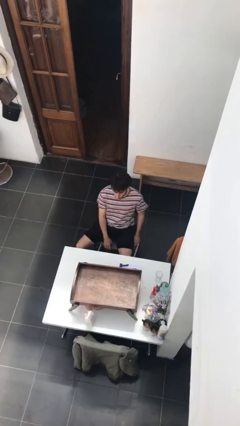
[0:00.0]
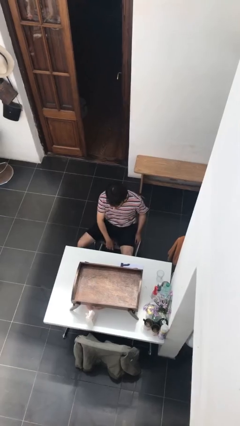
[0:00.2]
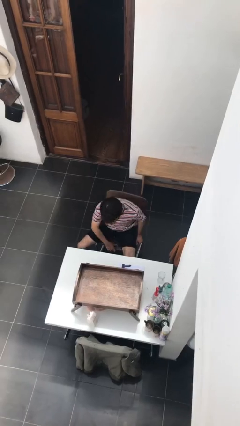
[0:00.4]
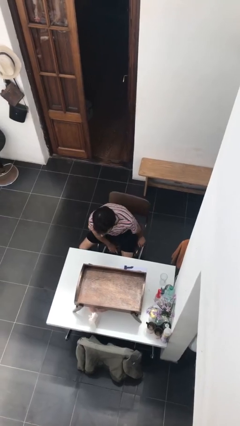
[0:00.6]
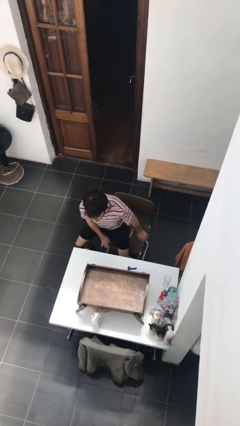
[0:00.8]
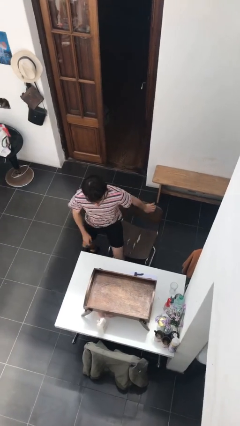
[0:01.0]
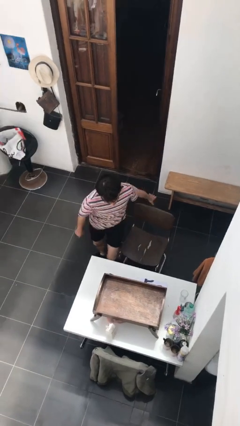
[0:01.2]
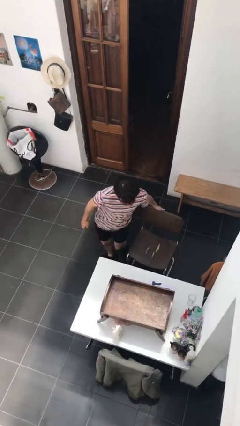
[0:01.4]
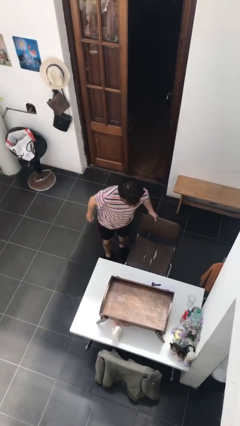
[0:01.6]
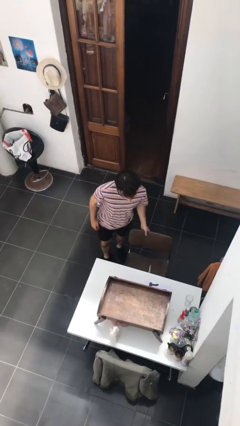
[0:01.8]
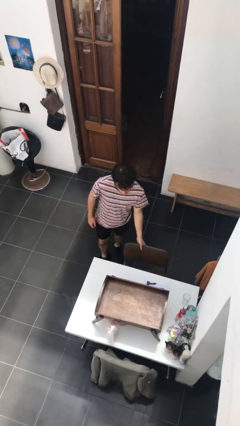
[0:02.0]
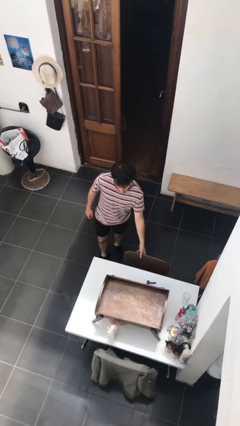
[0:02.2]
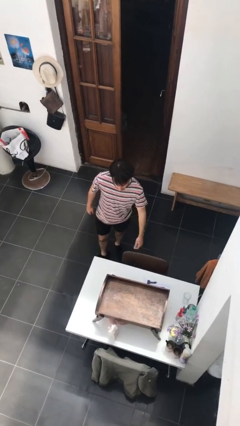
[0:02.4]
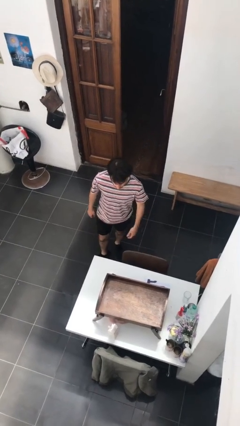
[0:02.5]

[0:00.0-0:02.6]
person stands up

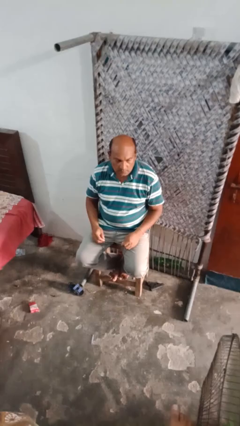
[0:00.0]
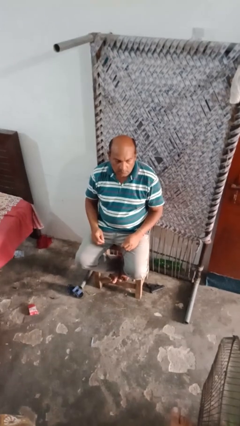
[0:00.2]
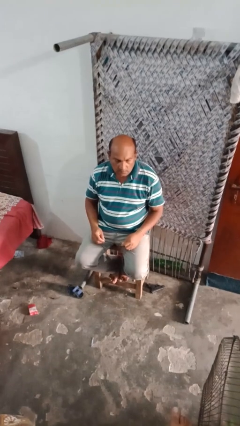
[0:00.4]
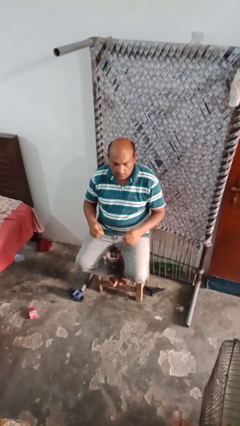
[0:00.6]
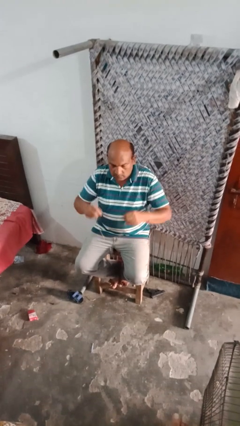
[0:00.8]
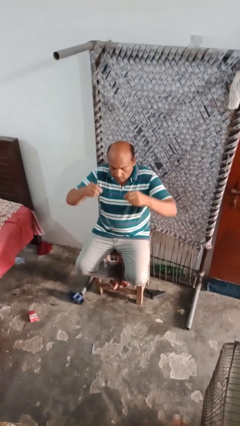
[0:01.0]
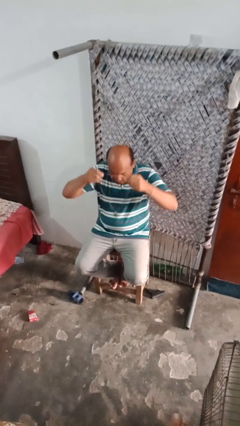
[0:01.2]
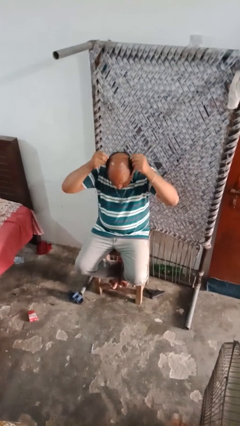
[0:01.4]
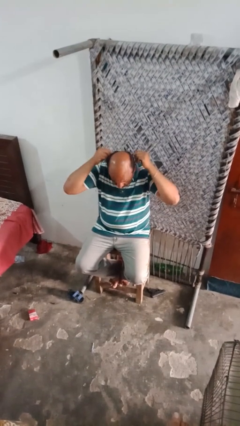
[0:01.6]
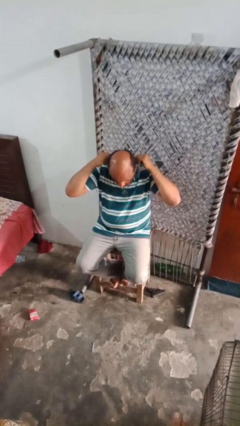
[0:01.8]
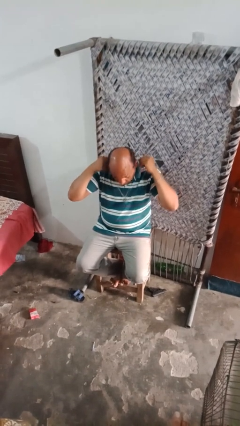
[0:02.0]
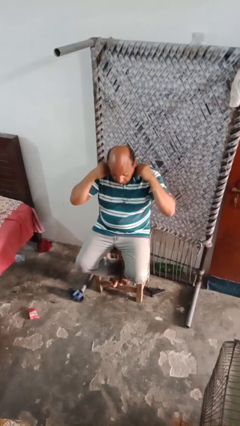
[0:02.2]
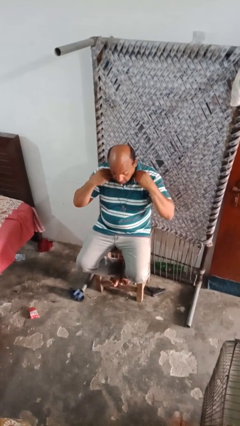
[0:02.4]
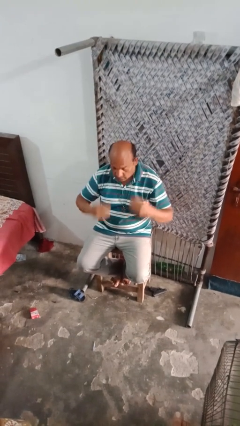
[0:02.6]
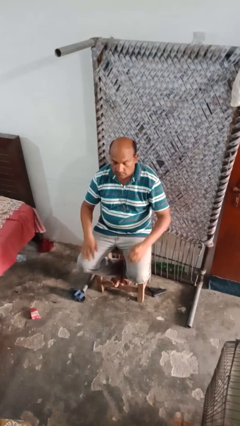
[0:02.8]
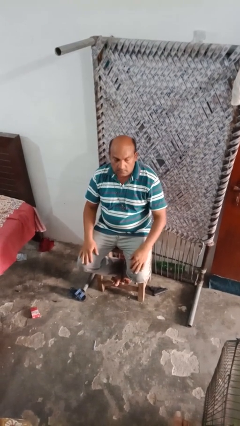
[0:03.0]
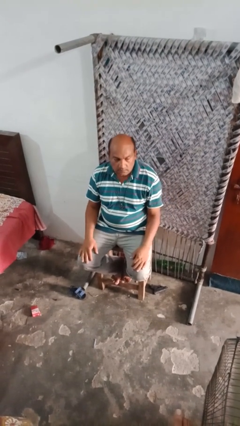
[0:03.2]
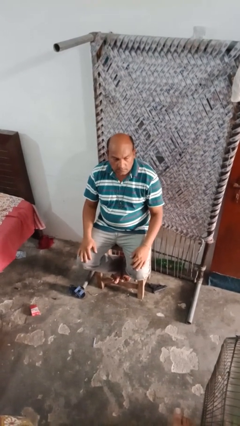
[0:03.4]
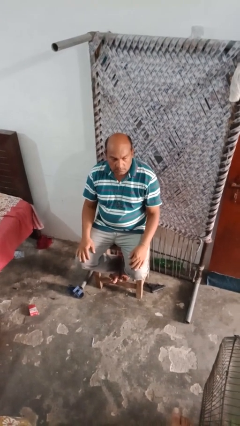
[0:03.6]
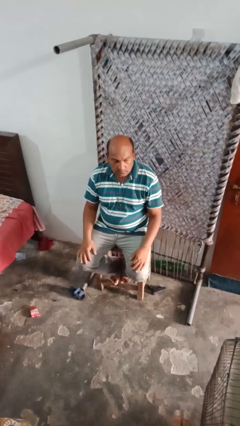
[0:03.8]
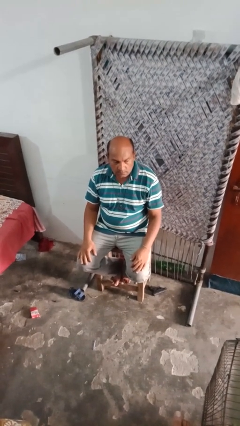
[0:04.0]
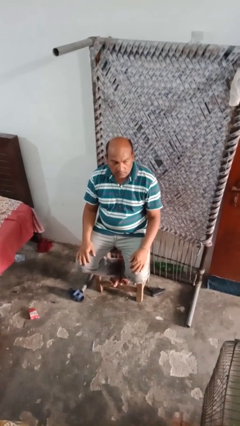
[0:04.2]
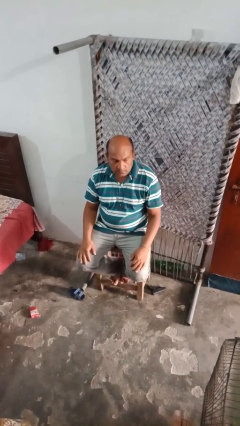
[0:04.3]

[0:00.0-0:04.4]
person puts on necklace

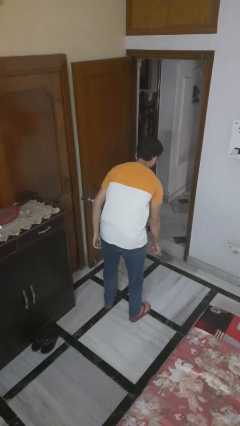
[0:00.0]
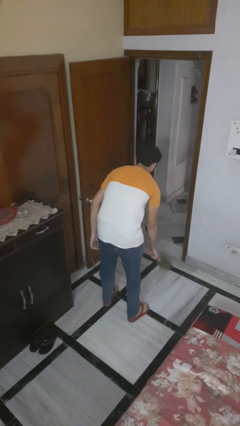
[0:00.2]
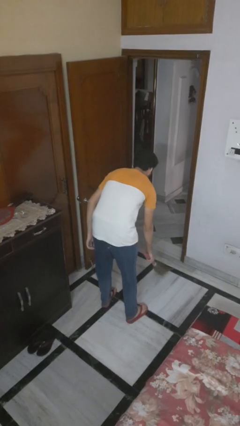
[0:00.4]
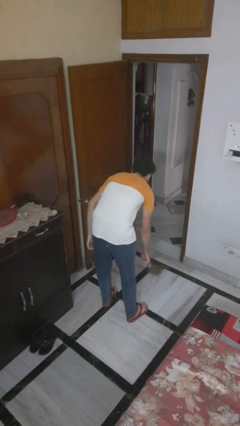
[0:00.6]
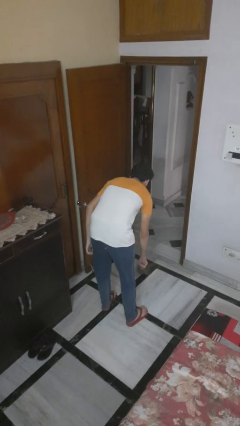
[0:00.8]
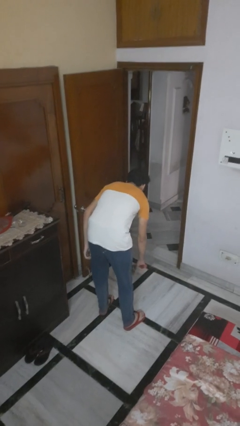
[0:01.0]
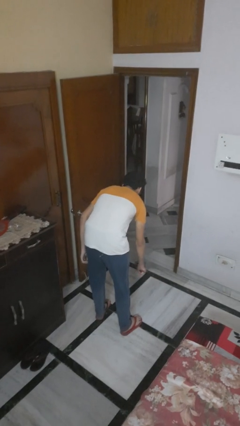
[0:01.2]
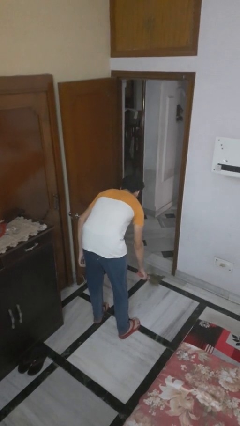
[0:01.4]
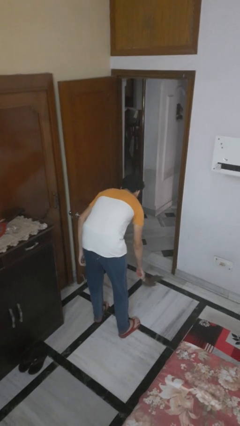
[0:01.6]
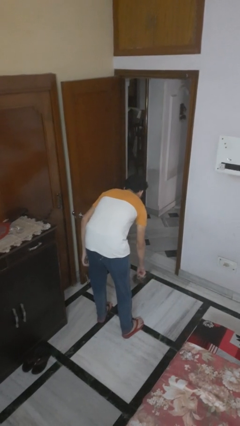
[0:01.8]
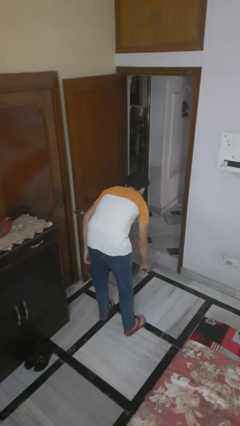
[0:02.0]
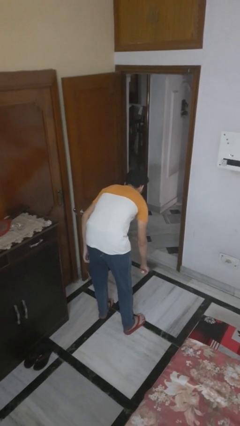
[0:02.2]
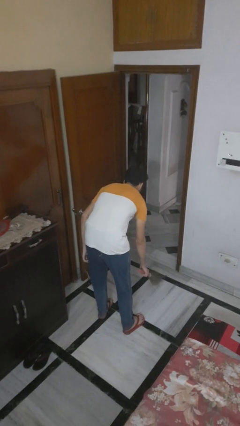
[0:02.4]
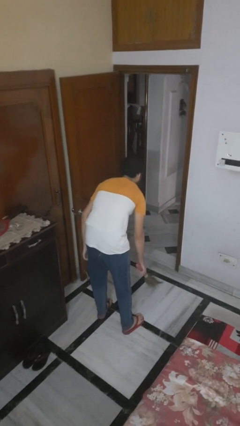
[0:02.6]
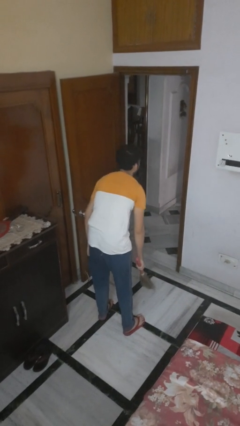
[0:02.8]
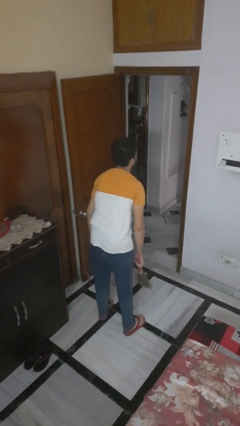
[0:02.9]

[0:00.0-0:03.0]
person sweeps floor

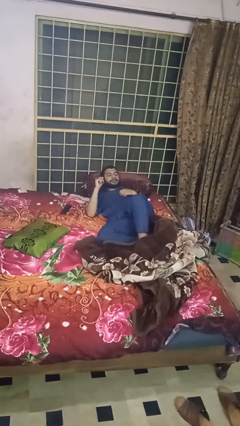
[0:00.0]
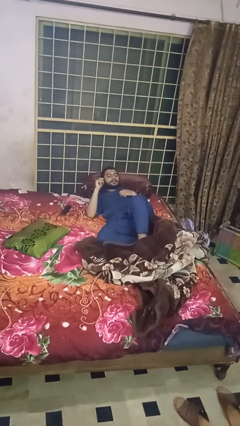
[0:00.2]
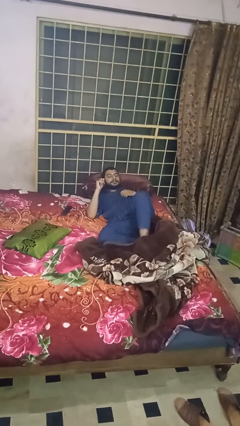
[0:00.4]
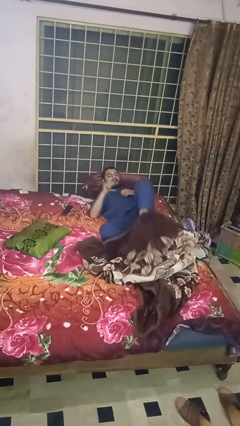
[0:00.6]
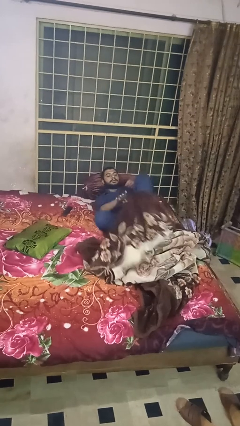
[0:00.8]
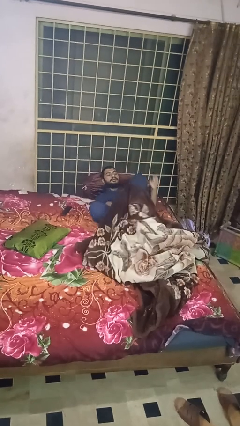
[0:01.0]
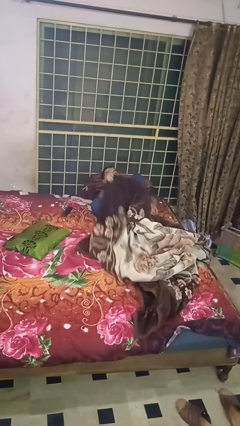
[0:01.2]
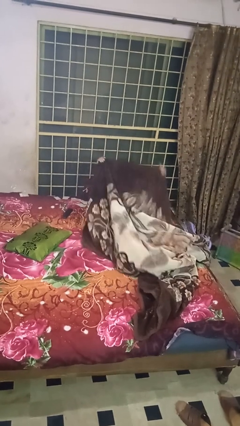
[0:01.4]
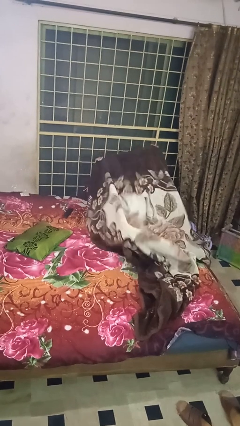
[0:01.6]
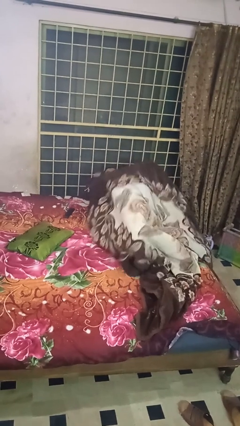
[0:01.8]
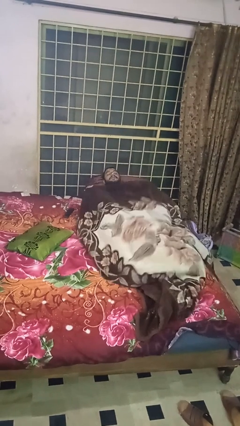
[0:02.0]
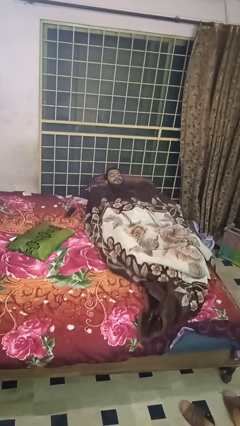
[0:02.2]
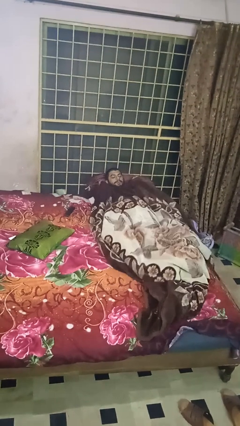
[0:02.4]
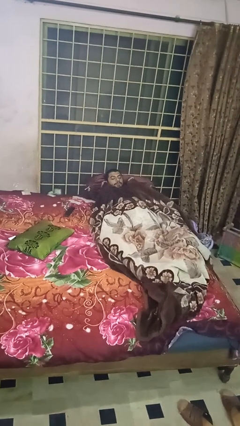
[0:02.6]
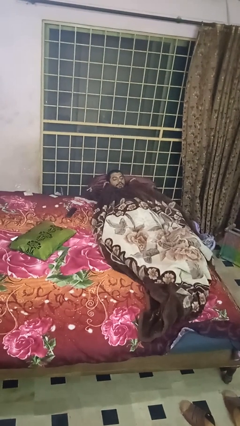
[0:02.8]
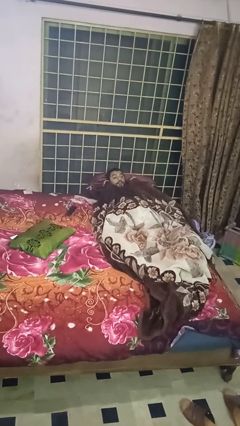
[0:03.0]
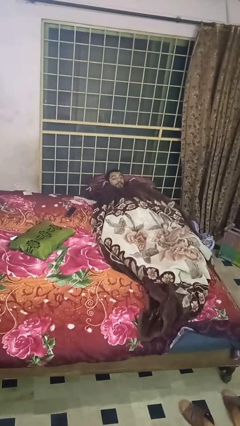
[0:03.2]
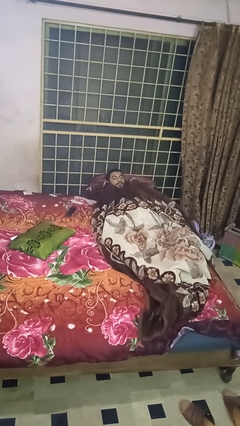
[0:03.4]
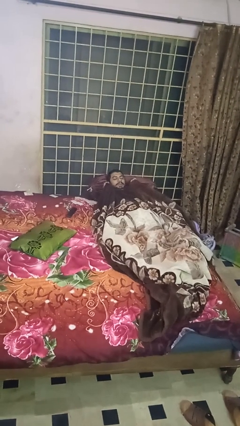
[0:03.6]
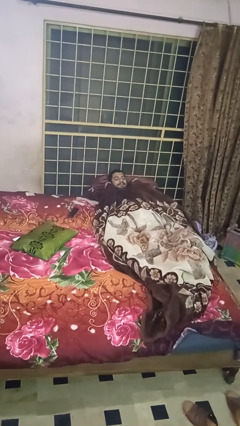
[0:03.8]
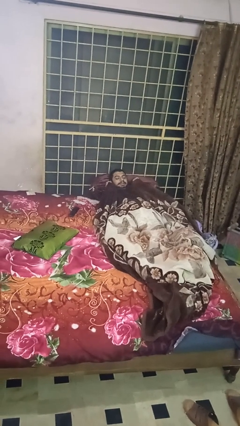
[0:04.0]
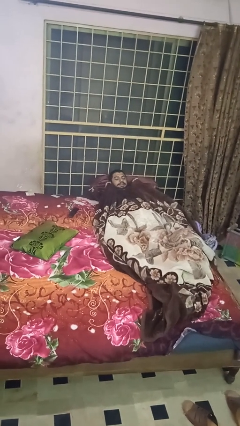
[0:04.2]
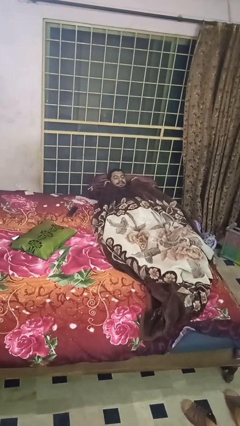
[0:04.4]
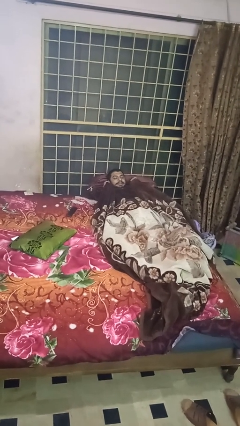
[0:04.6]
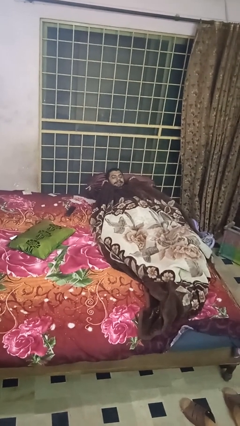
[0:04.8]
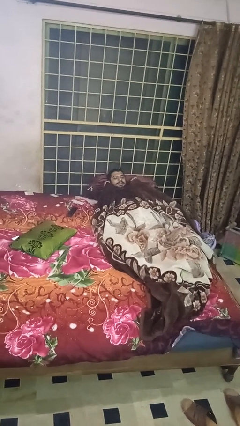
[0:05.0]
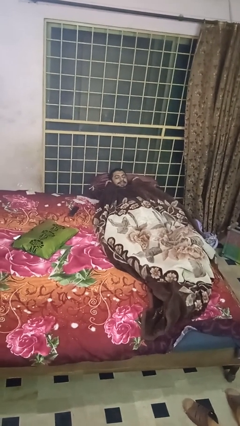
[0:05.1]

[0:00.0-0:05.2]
person covers with blanket

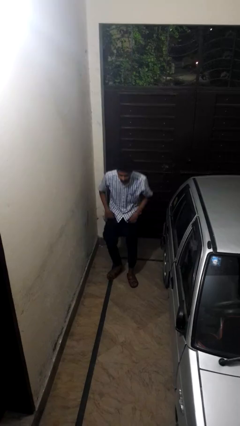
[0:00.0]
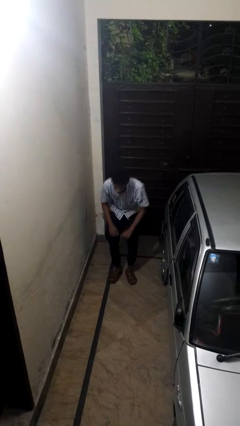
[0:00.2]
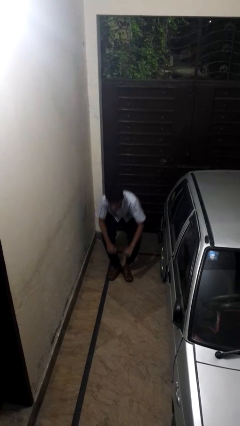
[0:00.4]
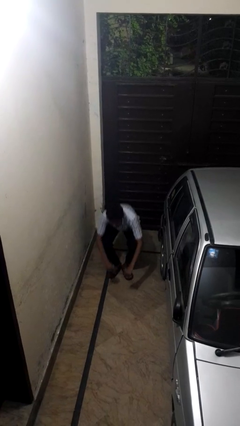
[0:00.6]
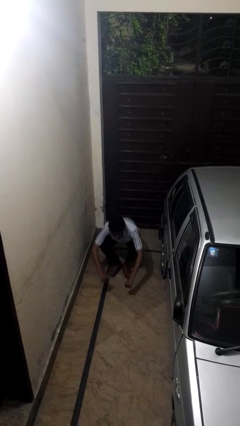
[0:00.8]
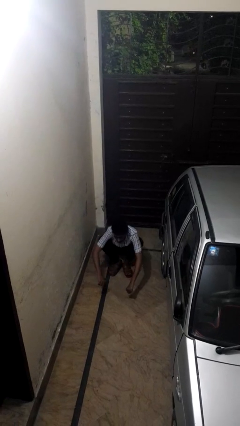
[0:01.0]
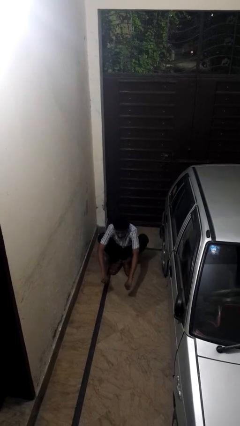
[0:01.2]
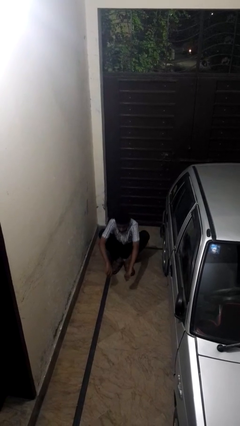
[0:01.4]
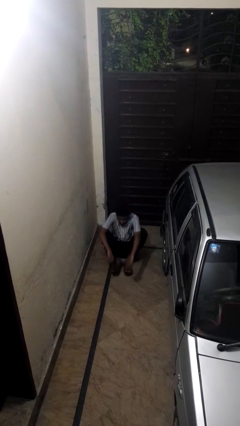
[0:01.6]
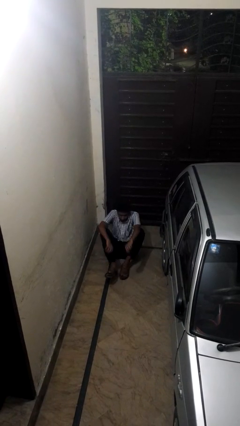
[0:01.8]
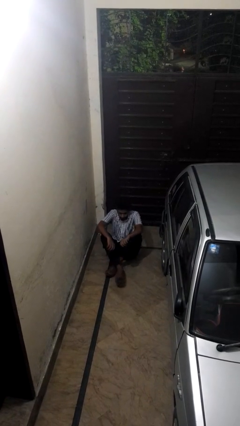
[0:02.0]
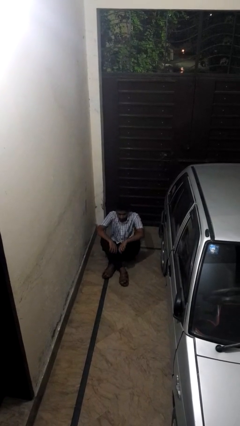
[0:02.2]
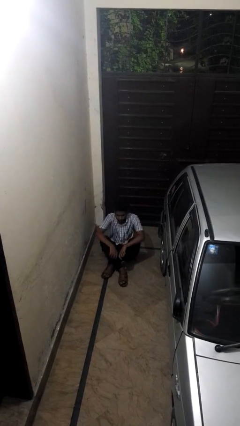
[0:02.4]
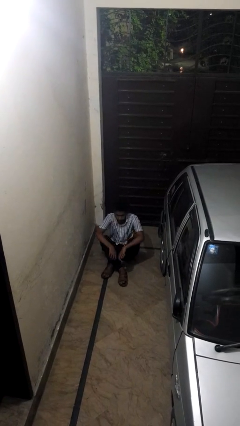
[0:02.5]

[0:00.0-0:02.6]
person sits crisscross
